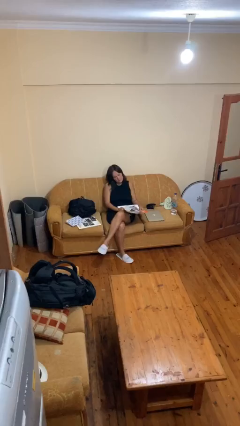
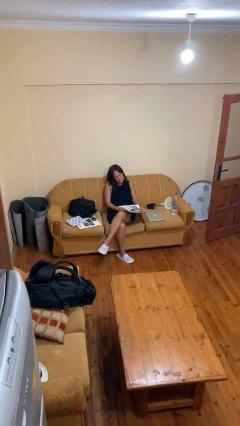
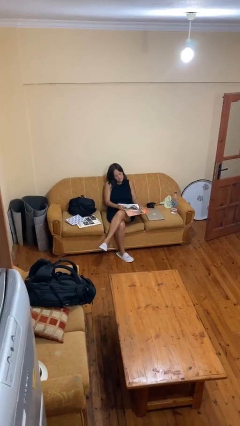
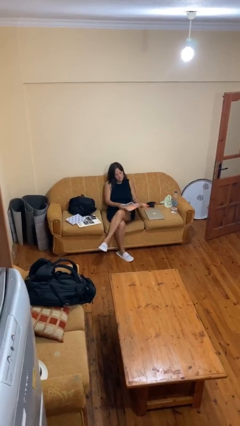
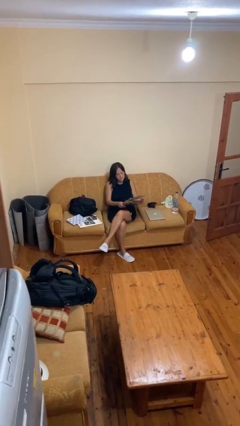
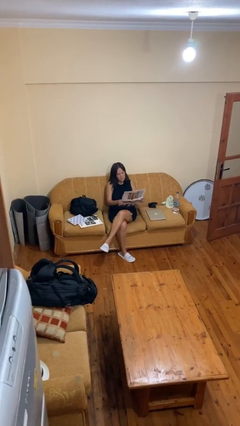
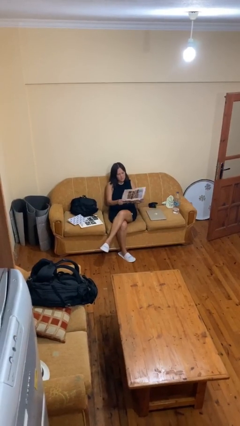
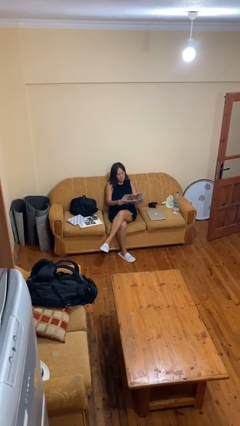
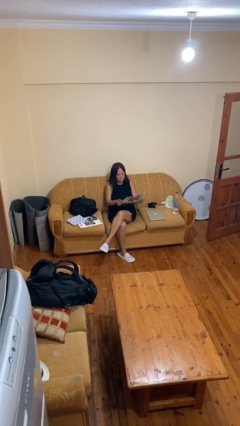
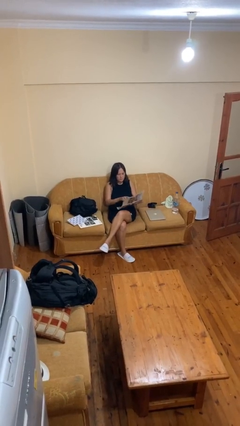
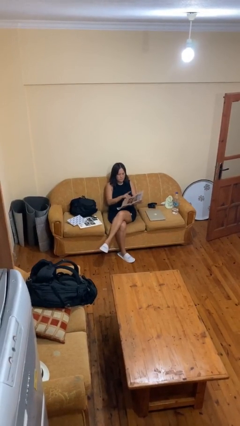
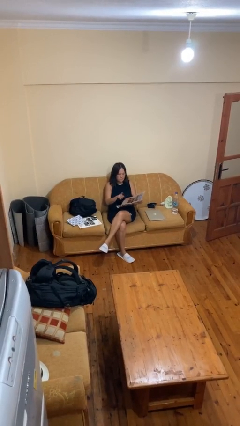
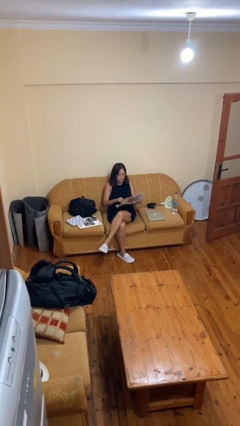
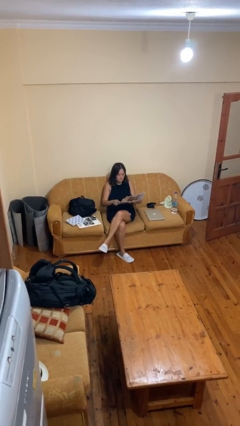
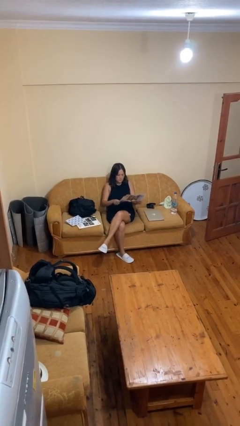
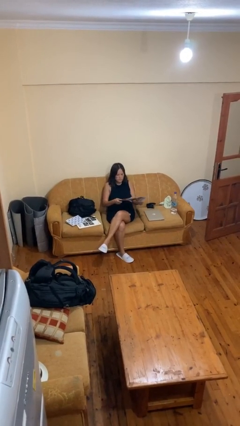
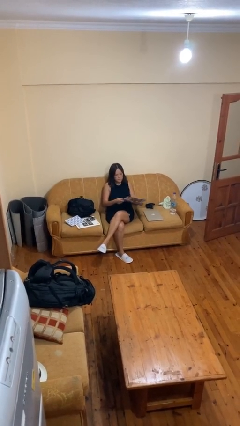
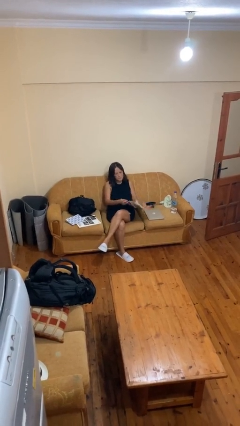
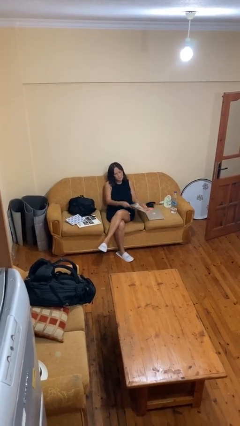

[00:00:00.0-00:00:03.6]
person reads newspaper

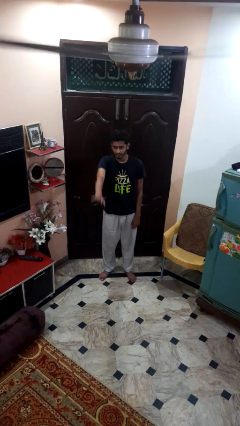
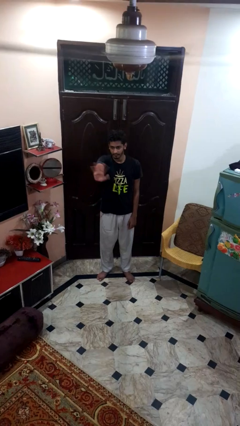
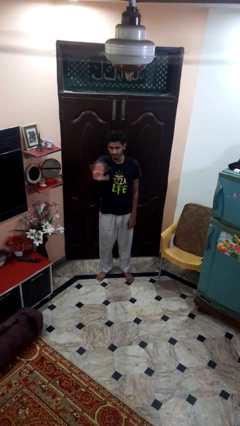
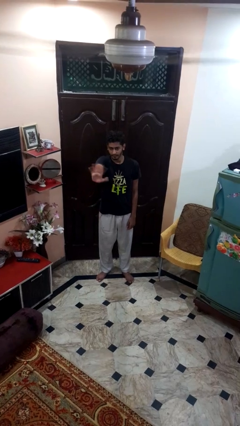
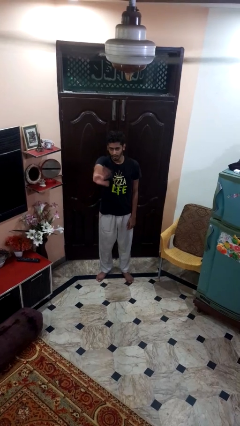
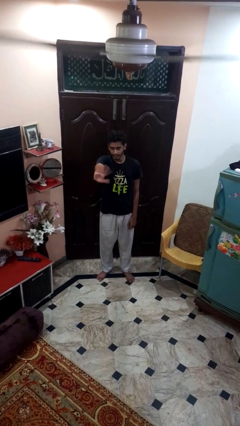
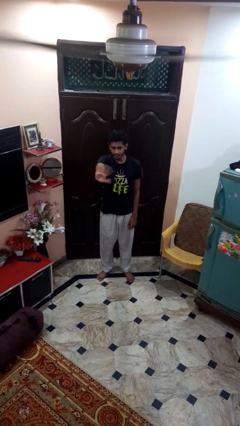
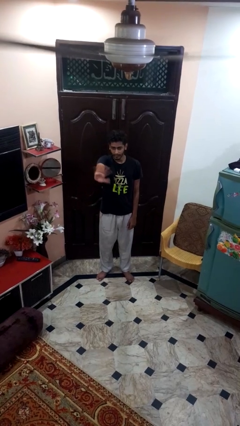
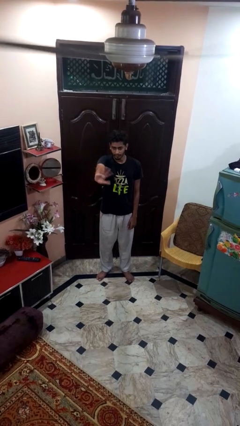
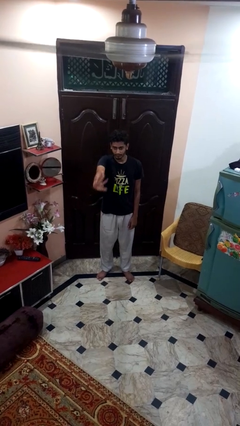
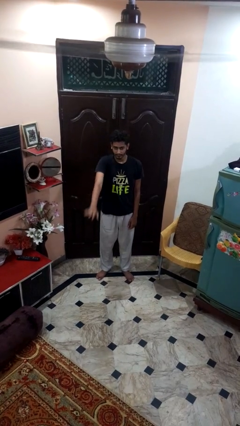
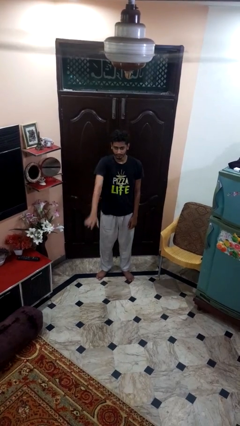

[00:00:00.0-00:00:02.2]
person waves at person

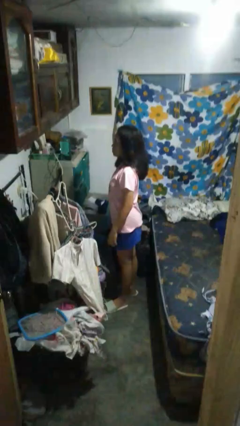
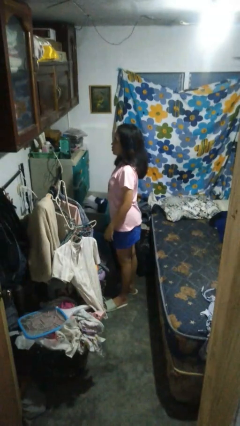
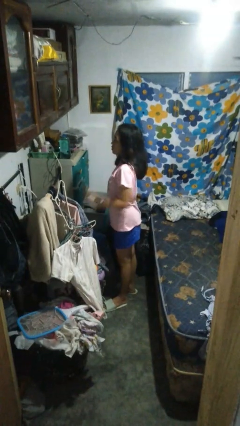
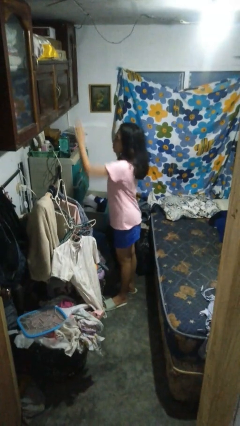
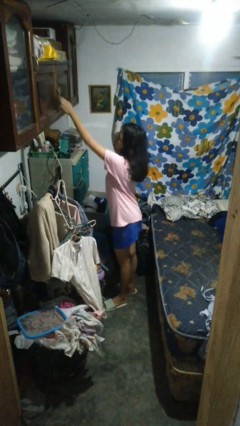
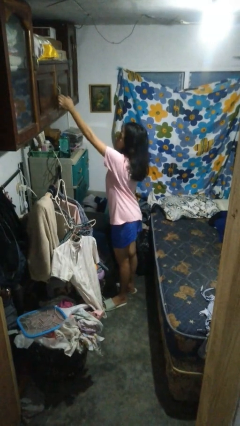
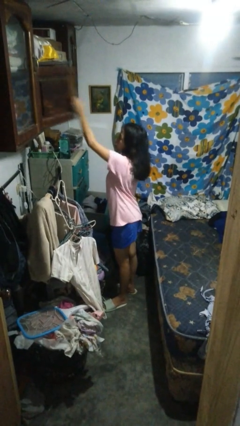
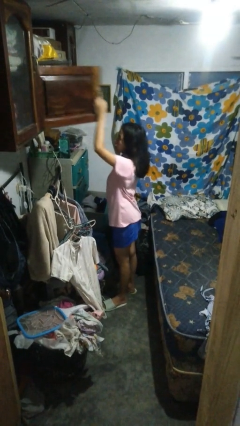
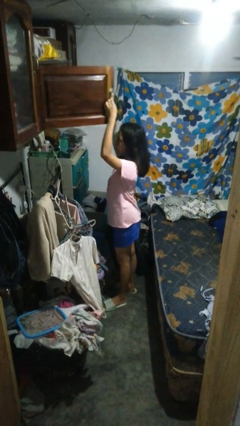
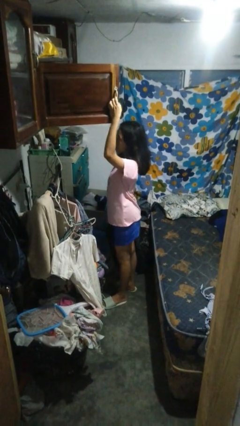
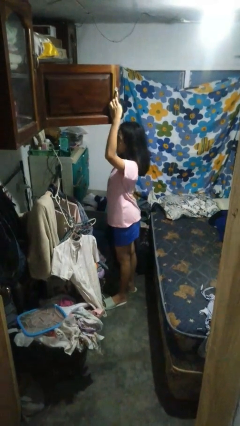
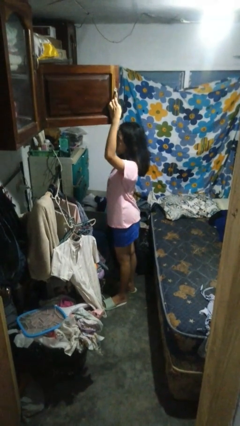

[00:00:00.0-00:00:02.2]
person opens closet door

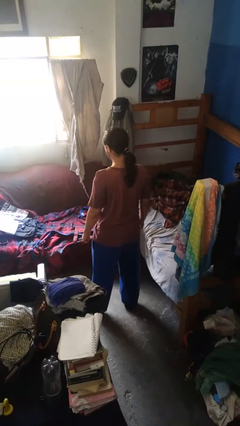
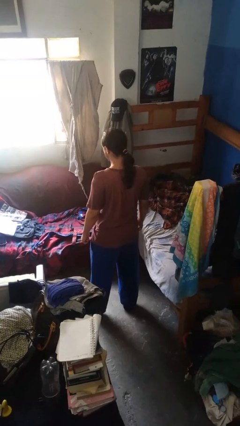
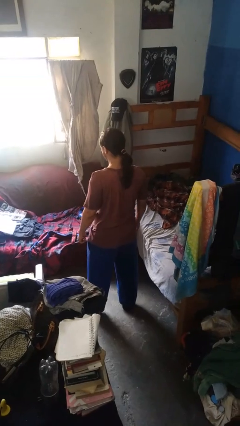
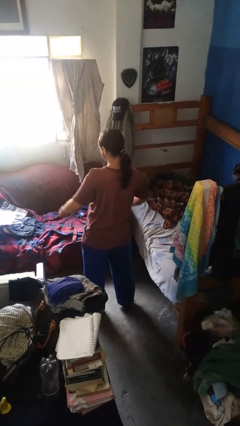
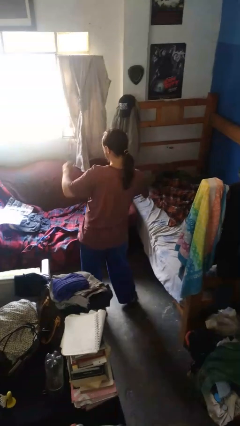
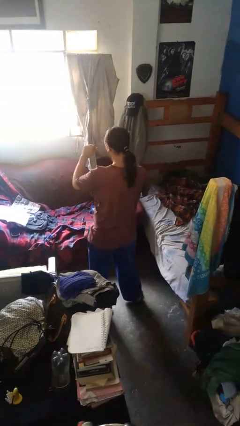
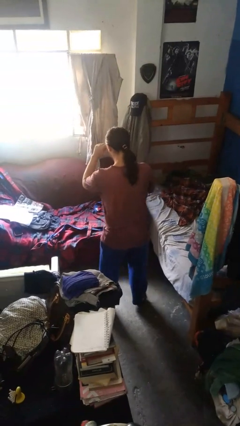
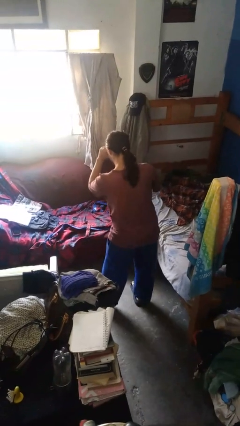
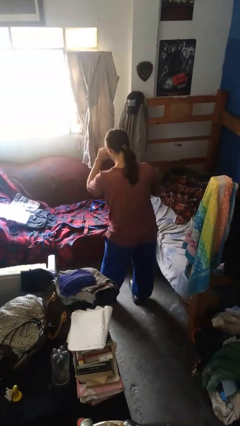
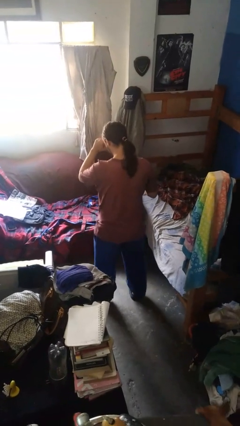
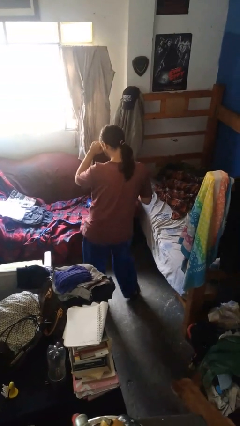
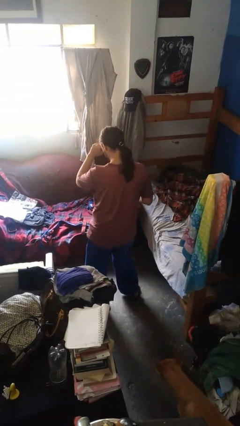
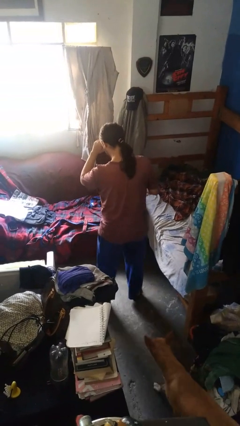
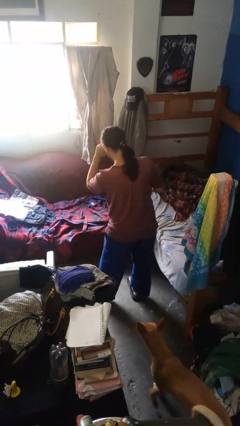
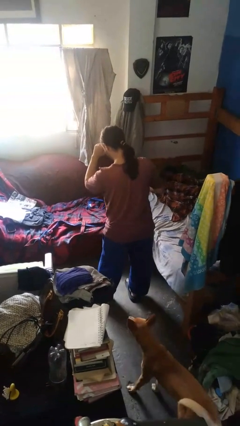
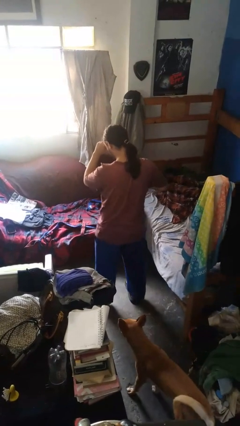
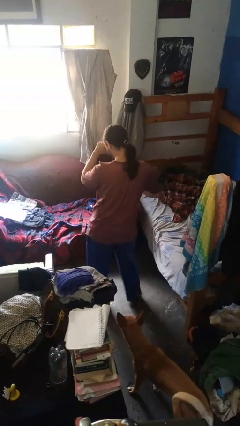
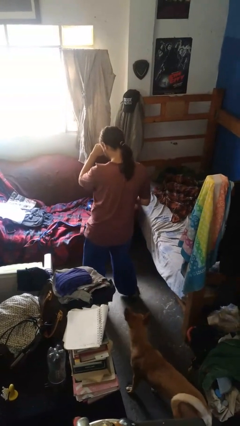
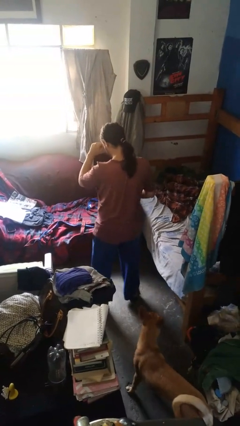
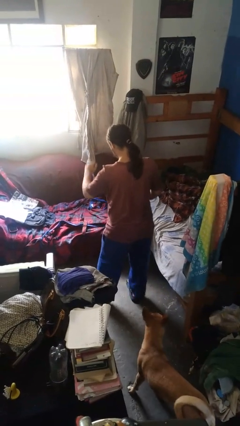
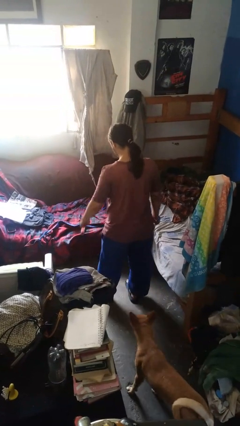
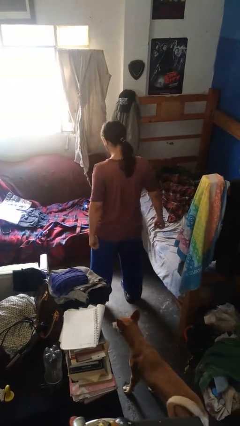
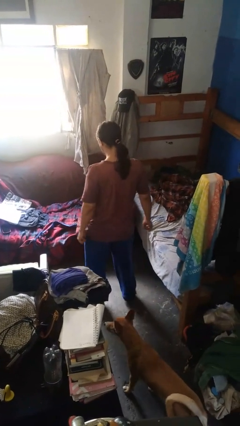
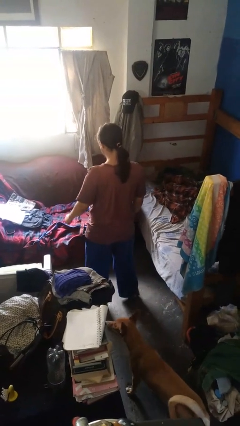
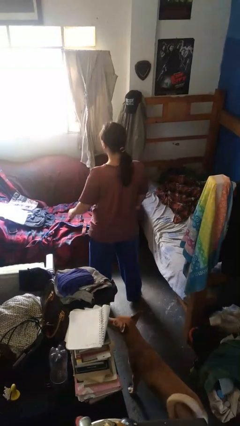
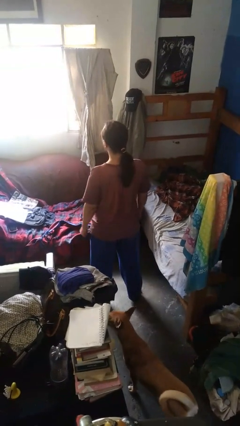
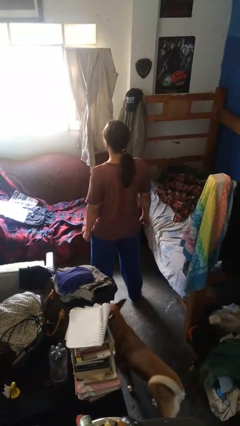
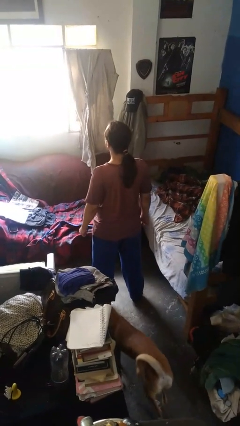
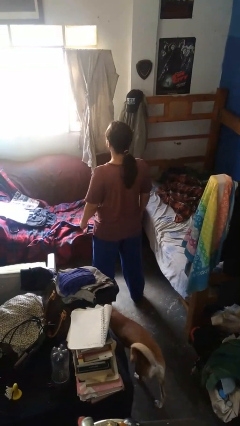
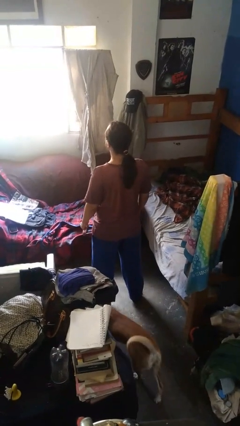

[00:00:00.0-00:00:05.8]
person wiggles hips

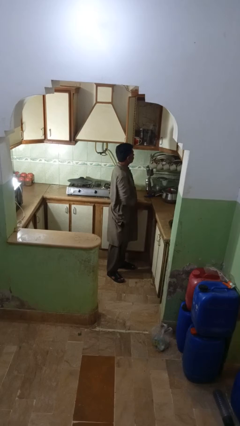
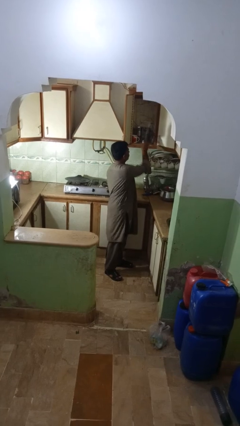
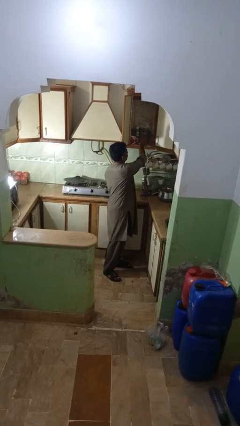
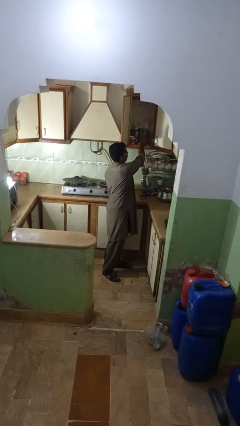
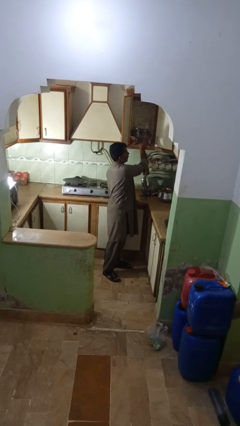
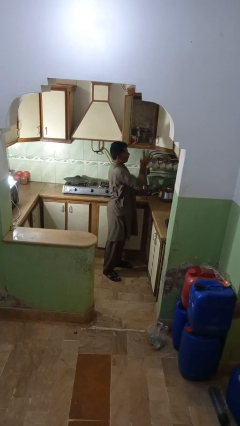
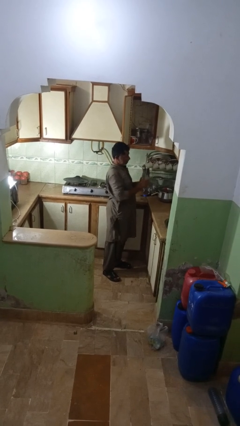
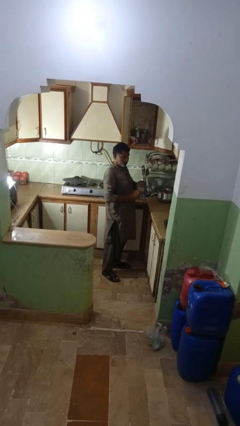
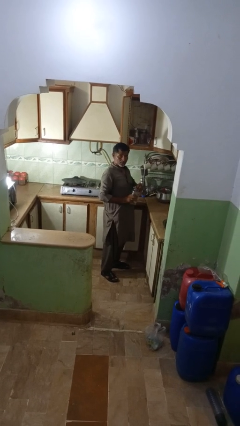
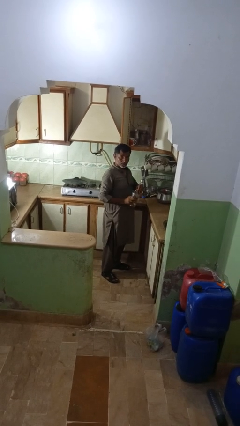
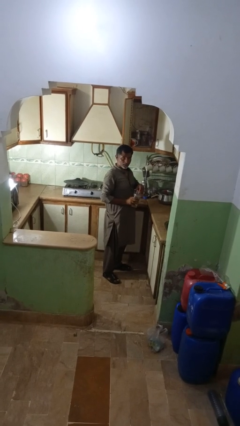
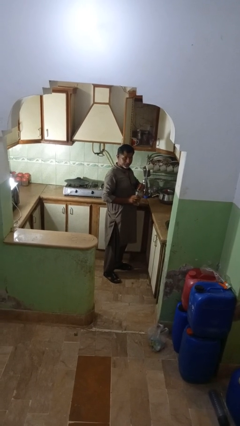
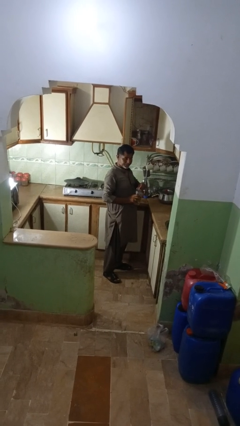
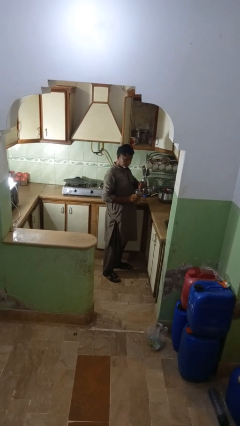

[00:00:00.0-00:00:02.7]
person takes object from kitchen drawer

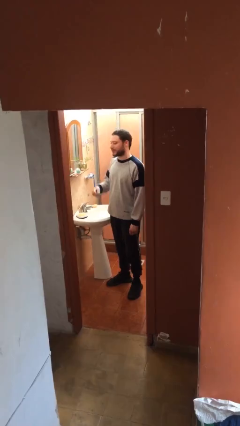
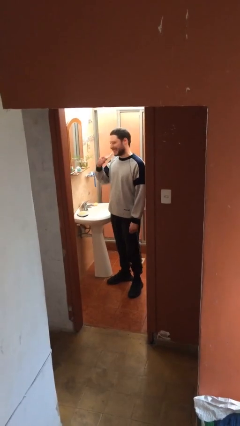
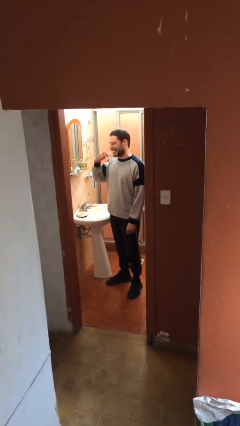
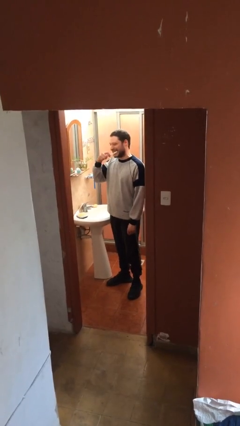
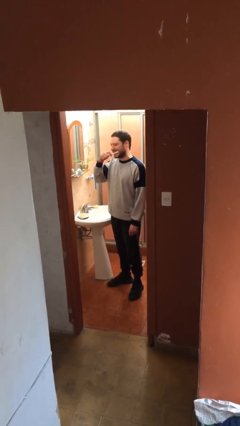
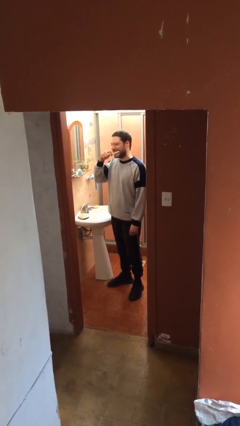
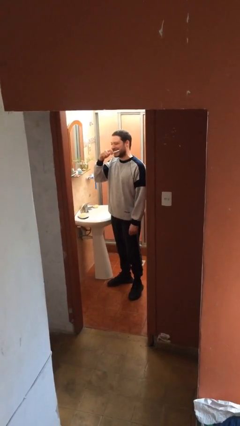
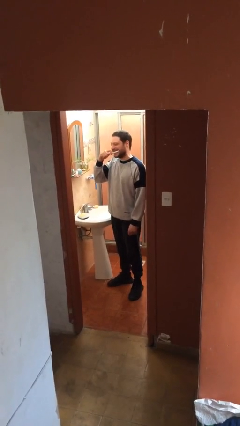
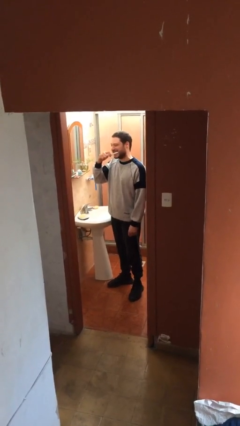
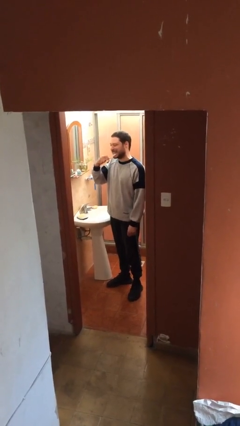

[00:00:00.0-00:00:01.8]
person brushes teeth
